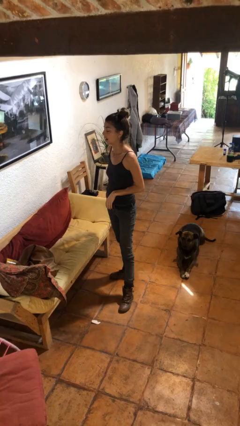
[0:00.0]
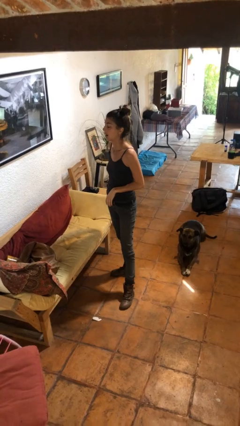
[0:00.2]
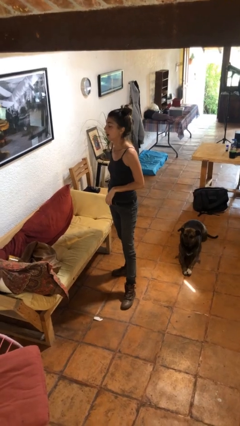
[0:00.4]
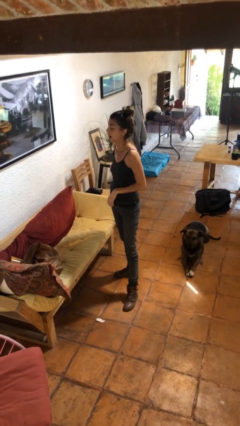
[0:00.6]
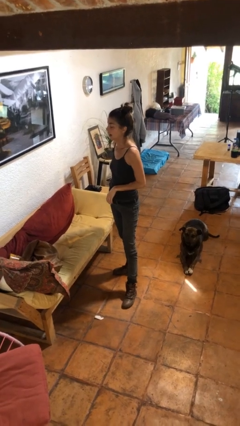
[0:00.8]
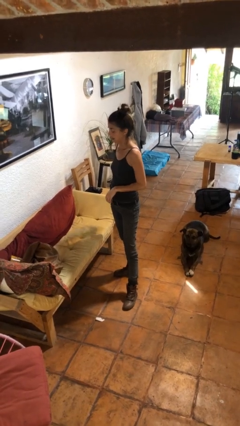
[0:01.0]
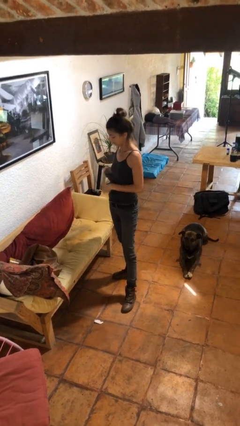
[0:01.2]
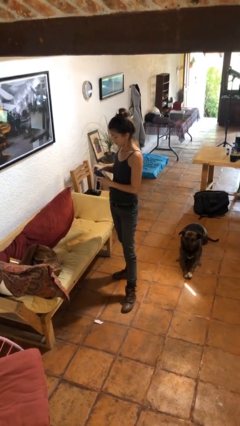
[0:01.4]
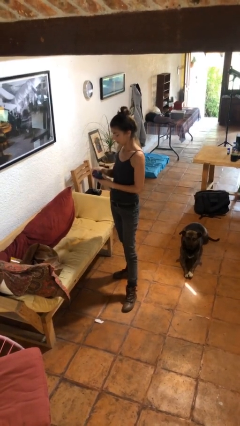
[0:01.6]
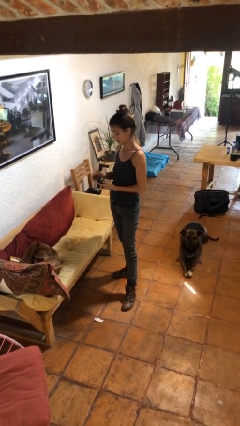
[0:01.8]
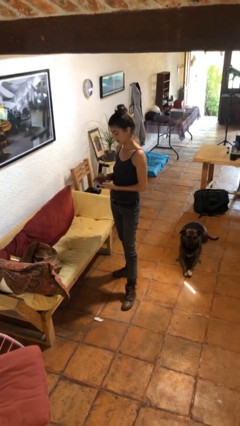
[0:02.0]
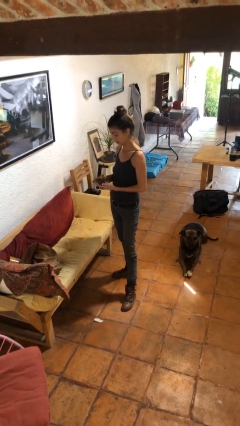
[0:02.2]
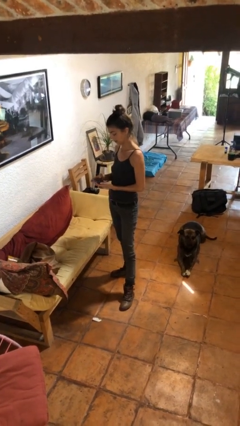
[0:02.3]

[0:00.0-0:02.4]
person takes phone from pocket

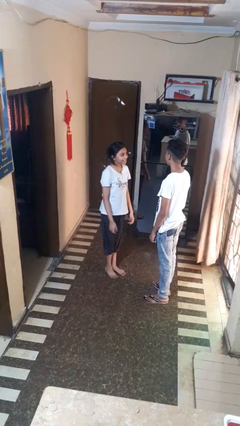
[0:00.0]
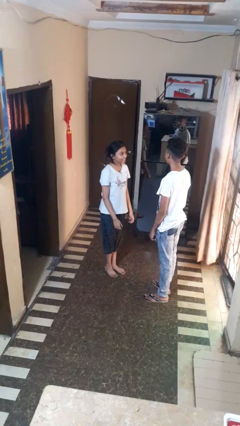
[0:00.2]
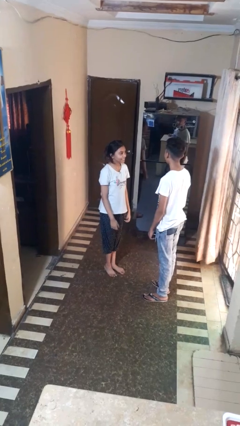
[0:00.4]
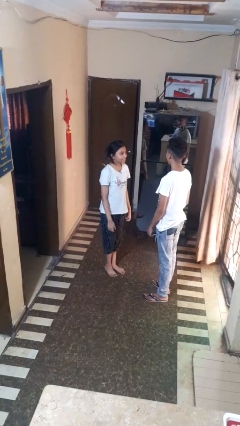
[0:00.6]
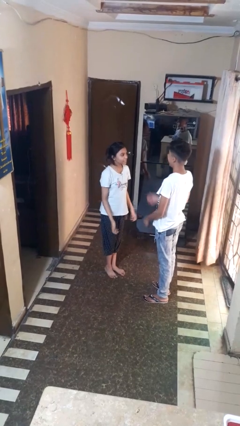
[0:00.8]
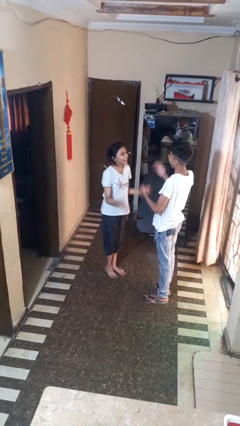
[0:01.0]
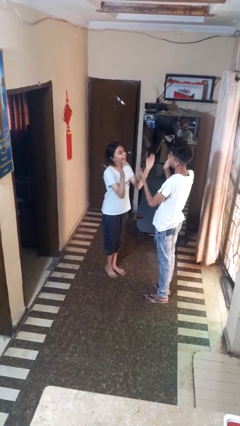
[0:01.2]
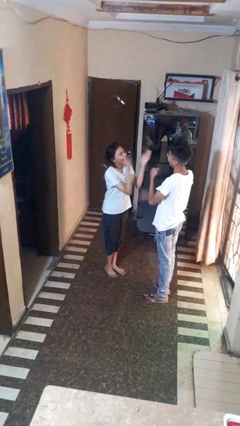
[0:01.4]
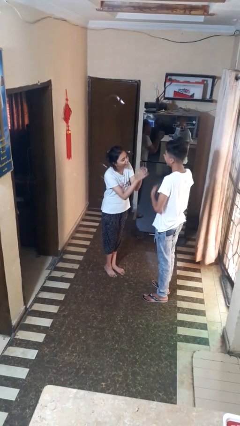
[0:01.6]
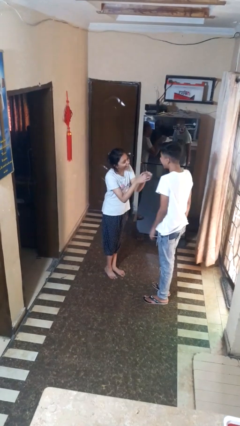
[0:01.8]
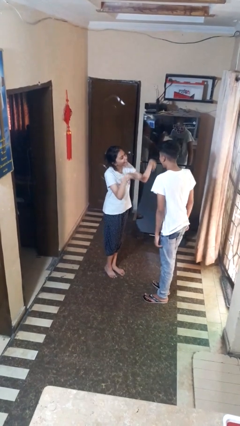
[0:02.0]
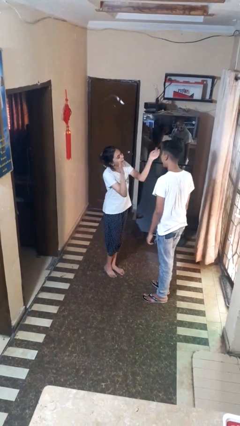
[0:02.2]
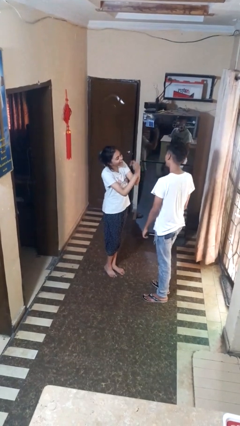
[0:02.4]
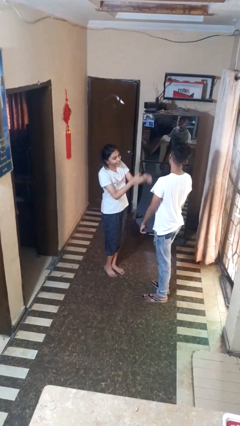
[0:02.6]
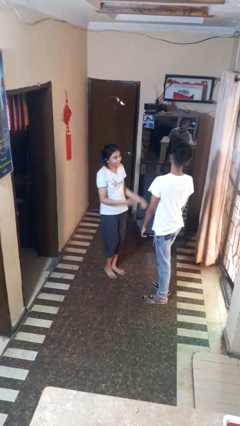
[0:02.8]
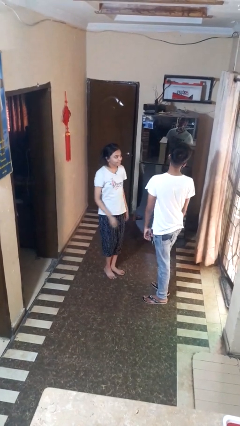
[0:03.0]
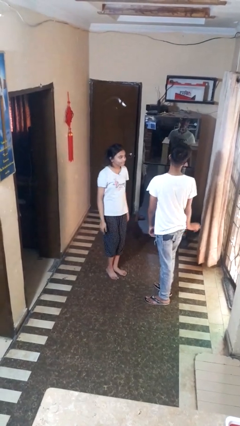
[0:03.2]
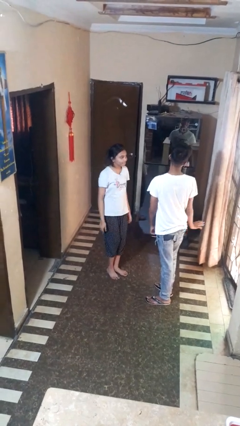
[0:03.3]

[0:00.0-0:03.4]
person laughs with person

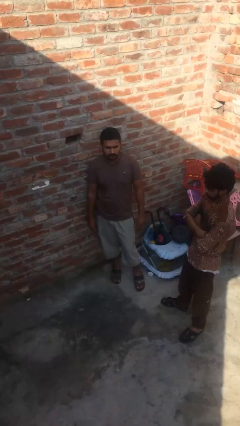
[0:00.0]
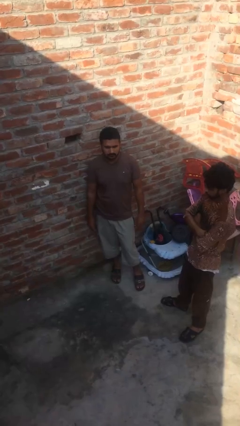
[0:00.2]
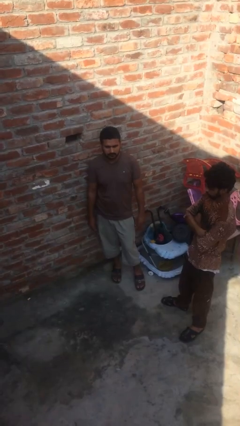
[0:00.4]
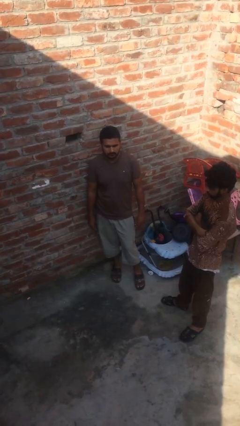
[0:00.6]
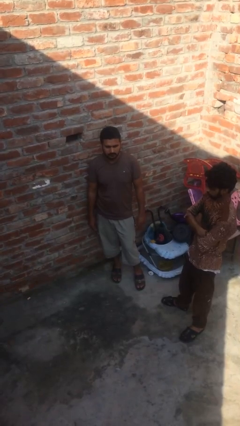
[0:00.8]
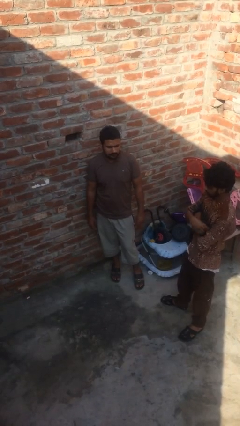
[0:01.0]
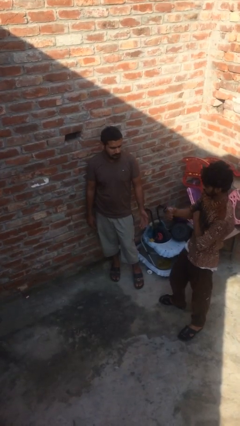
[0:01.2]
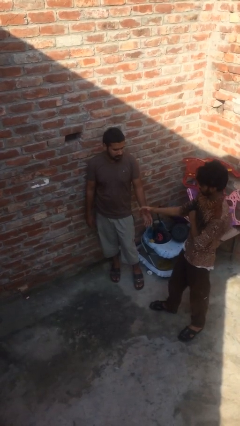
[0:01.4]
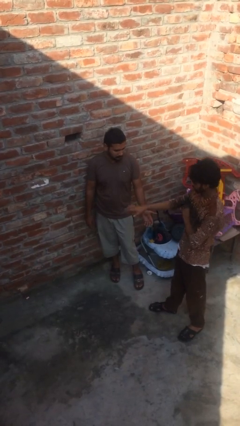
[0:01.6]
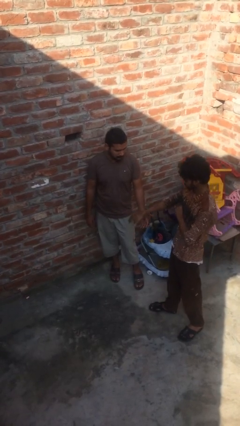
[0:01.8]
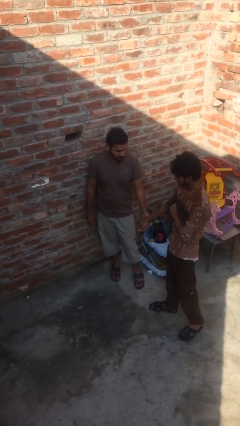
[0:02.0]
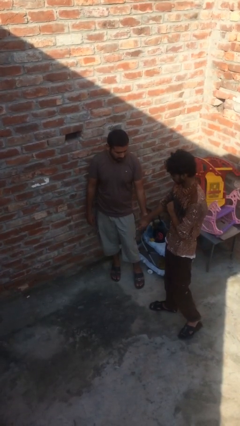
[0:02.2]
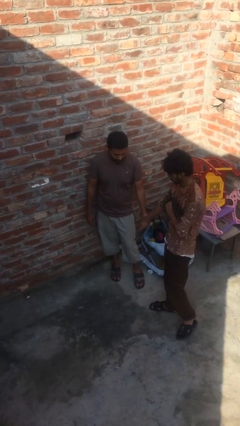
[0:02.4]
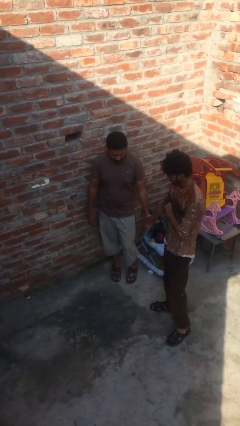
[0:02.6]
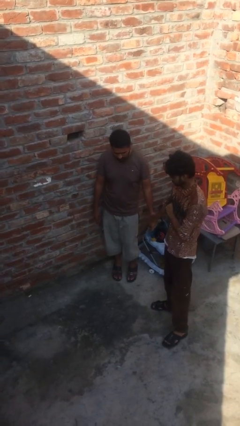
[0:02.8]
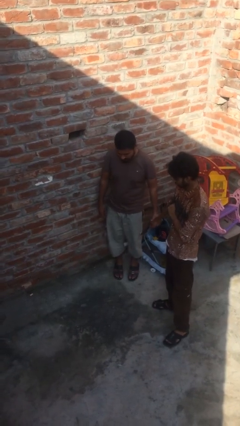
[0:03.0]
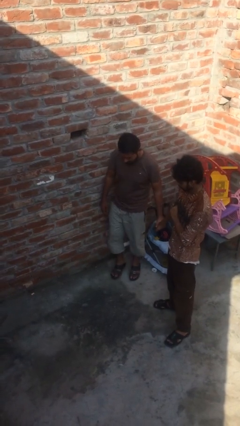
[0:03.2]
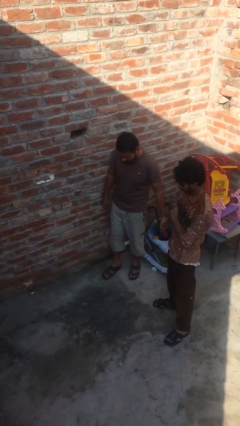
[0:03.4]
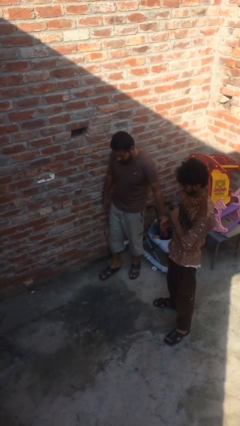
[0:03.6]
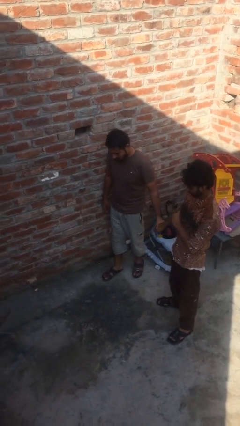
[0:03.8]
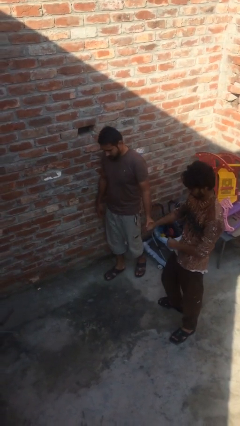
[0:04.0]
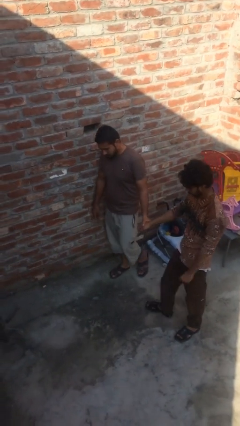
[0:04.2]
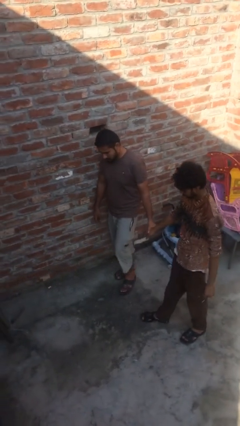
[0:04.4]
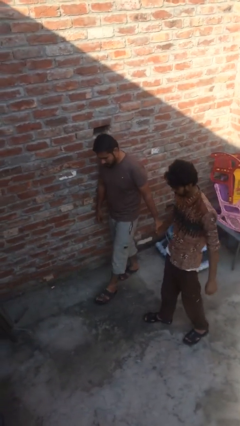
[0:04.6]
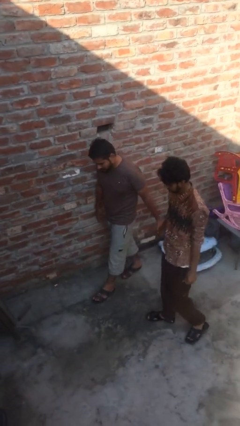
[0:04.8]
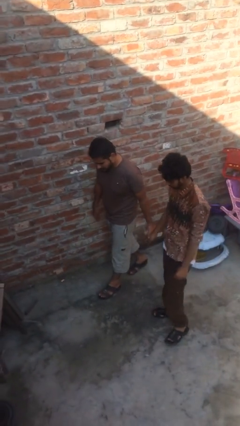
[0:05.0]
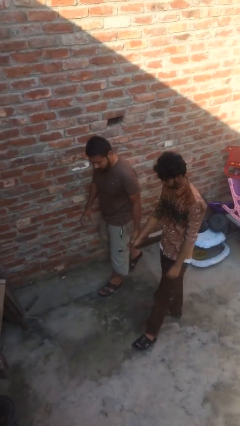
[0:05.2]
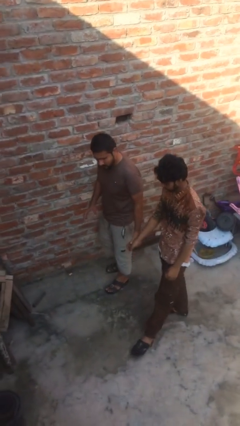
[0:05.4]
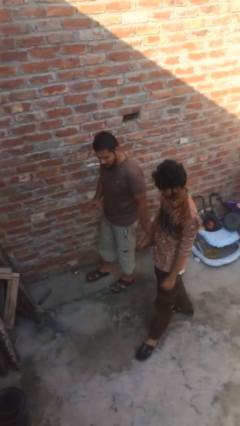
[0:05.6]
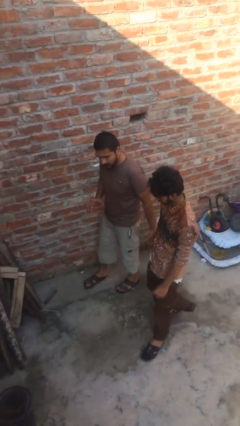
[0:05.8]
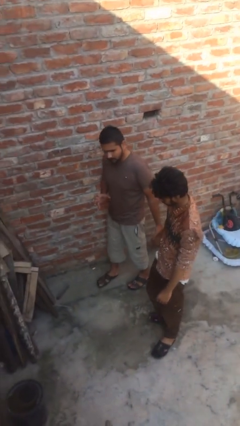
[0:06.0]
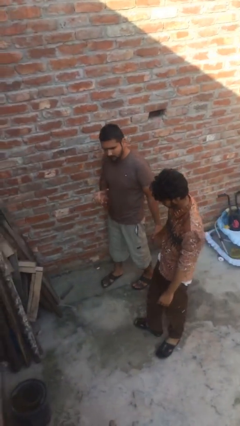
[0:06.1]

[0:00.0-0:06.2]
person holds hand

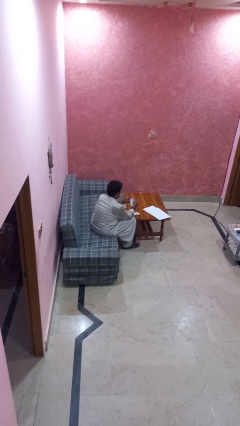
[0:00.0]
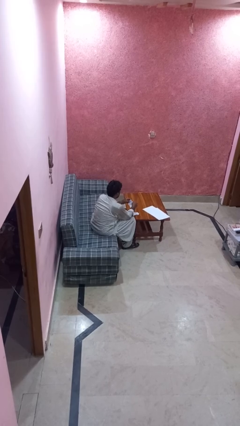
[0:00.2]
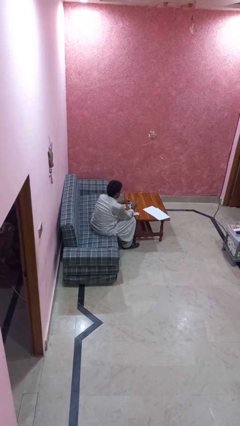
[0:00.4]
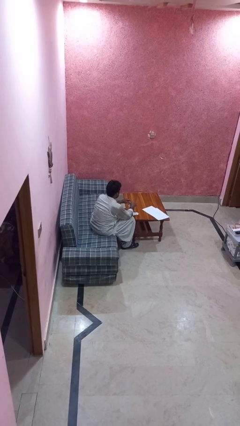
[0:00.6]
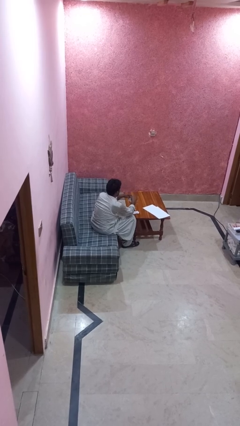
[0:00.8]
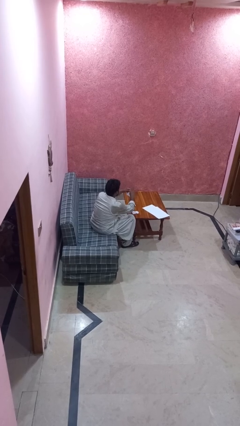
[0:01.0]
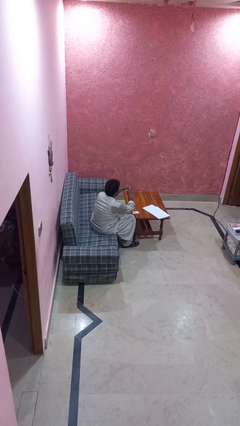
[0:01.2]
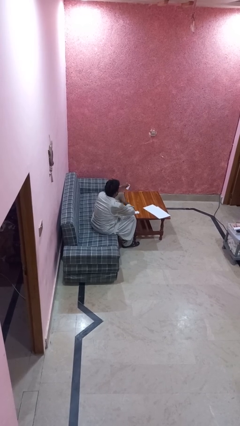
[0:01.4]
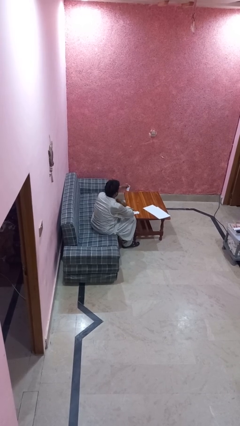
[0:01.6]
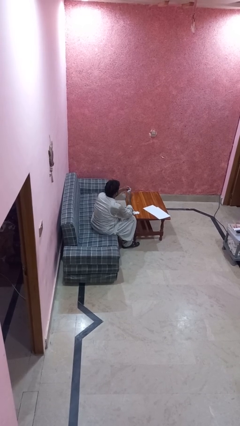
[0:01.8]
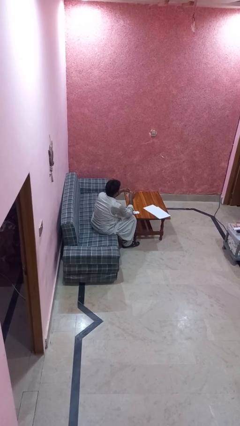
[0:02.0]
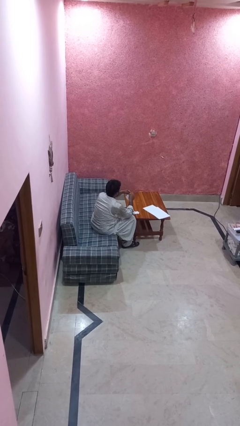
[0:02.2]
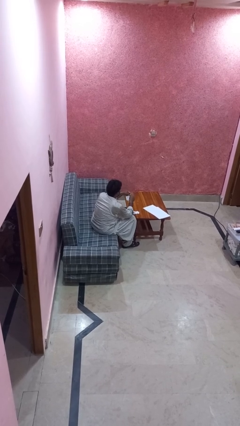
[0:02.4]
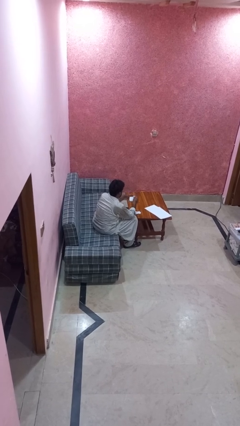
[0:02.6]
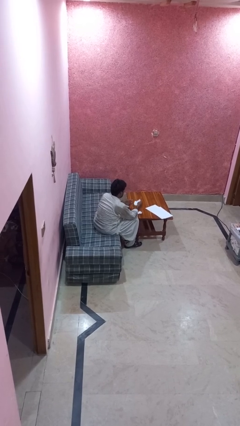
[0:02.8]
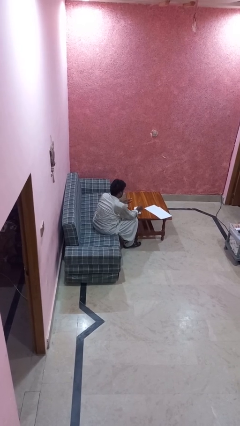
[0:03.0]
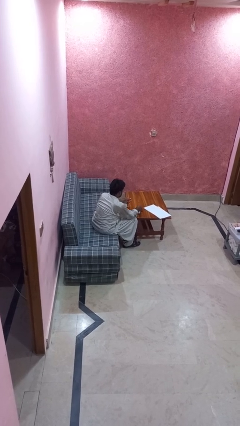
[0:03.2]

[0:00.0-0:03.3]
person tears paper

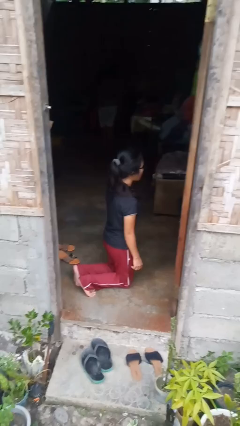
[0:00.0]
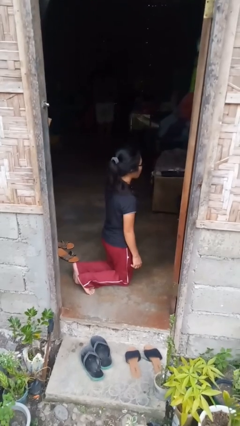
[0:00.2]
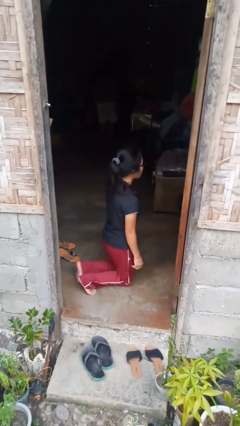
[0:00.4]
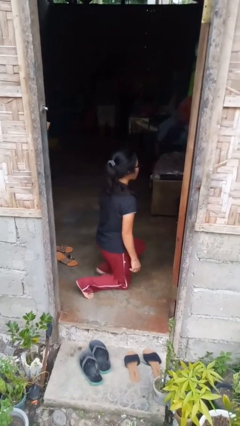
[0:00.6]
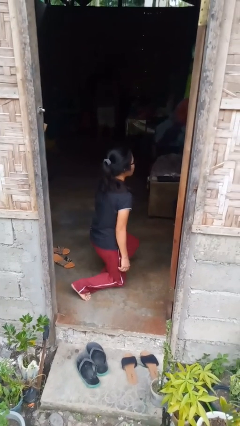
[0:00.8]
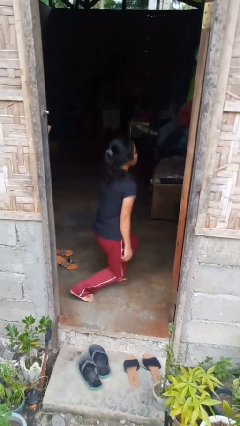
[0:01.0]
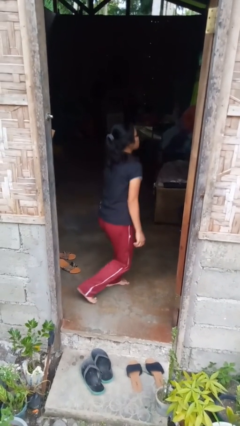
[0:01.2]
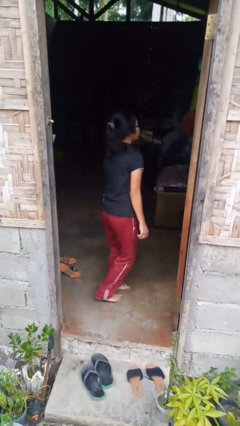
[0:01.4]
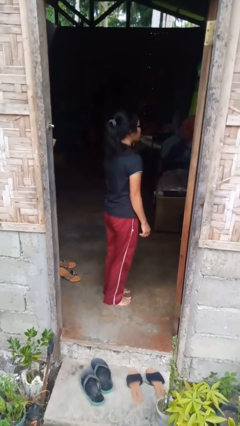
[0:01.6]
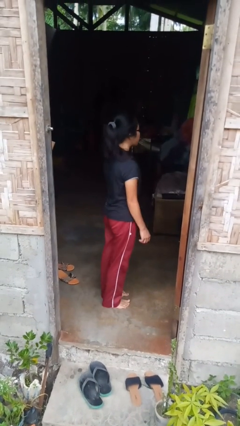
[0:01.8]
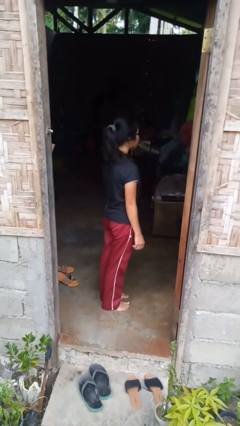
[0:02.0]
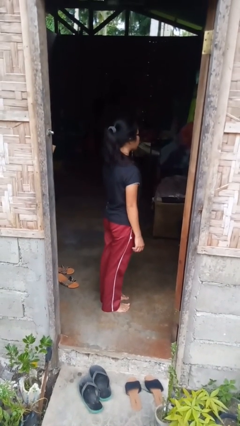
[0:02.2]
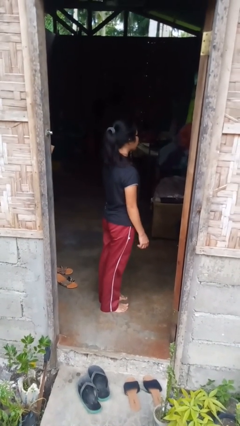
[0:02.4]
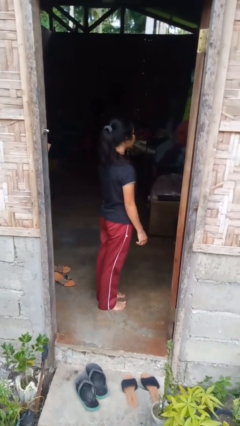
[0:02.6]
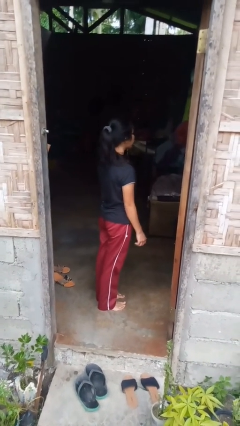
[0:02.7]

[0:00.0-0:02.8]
person stands up from floor
